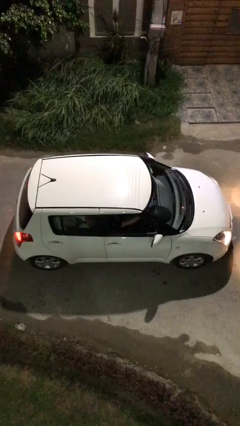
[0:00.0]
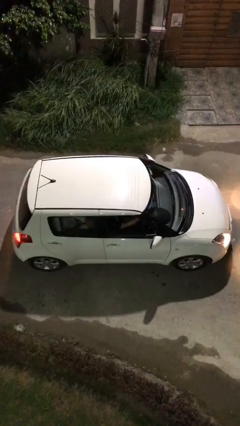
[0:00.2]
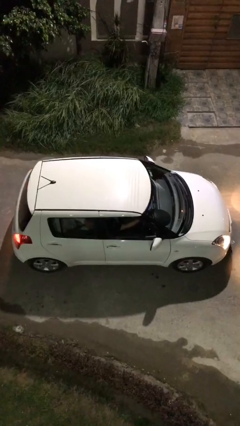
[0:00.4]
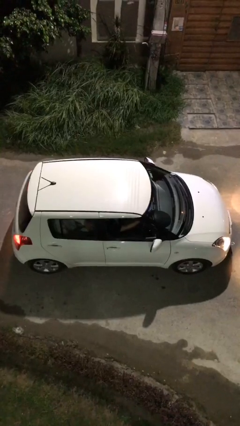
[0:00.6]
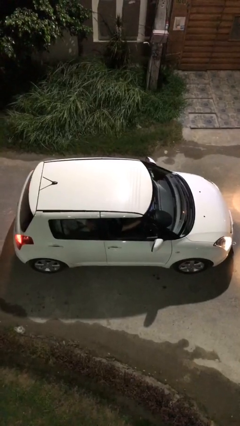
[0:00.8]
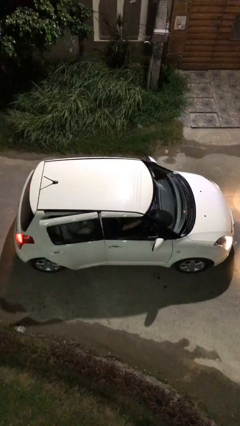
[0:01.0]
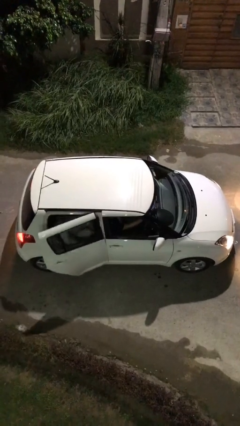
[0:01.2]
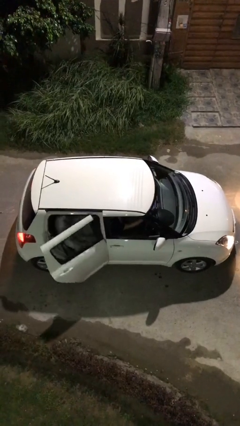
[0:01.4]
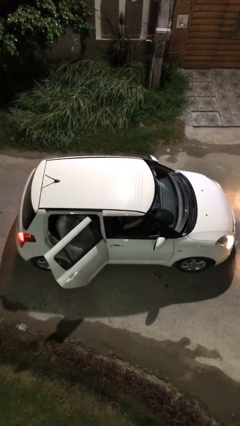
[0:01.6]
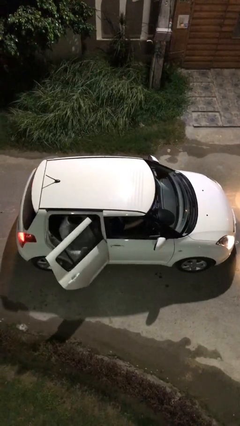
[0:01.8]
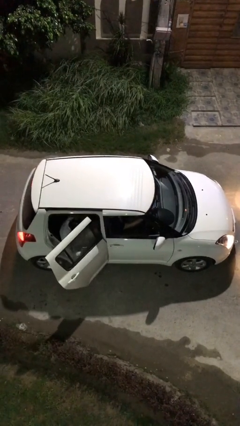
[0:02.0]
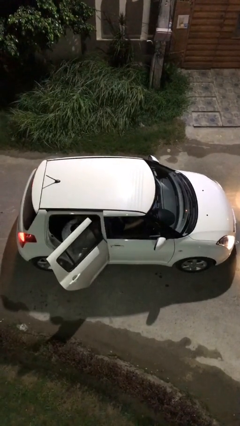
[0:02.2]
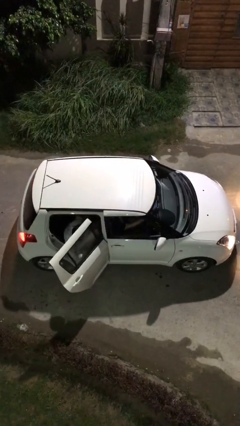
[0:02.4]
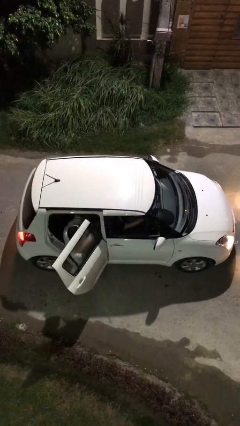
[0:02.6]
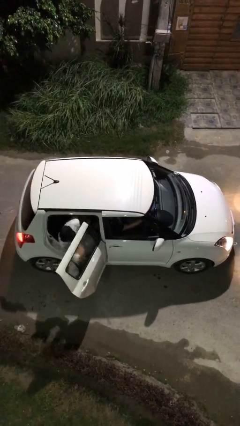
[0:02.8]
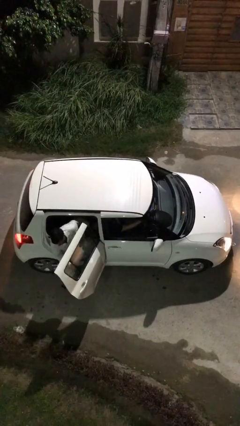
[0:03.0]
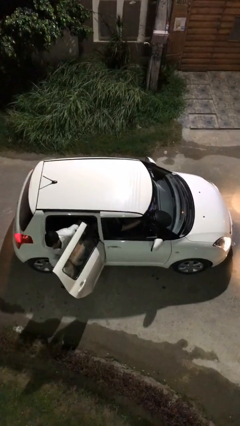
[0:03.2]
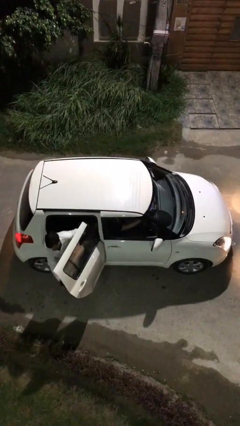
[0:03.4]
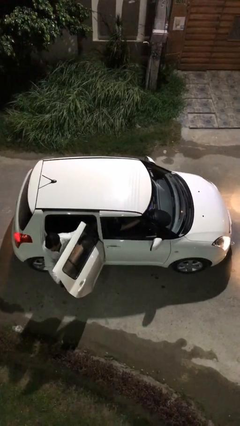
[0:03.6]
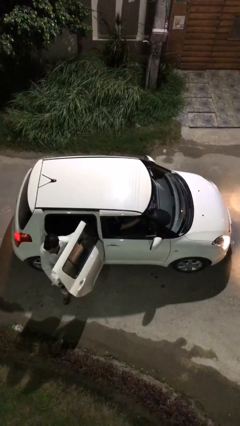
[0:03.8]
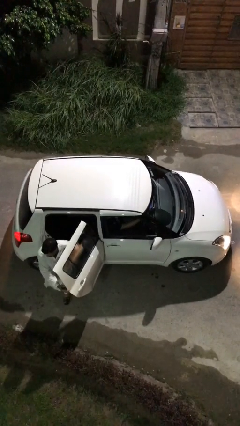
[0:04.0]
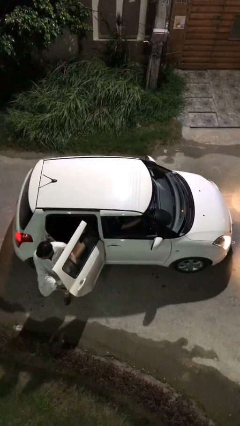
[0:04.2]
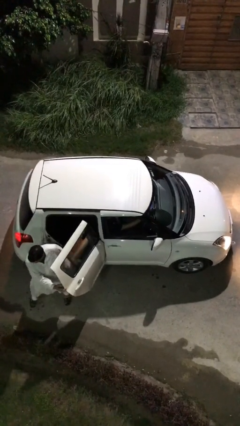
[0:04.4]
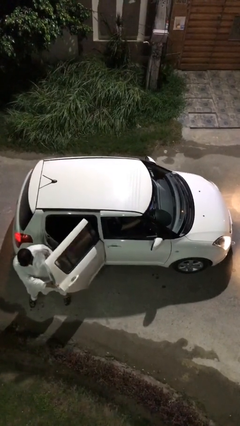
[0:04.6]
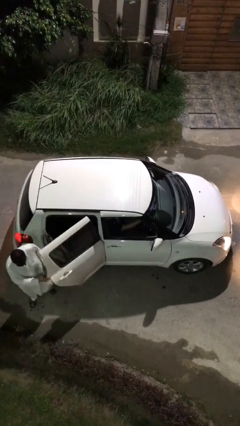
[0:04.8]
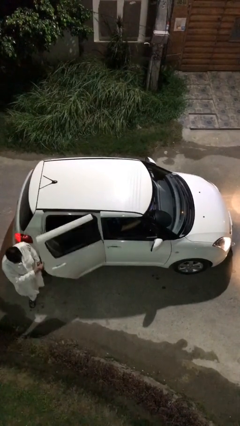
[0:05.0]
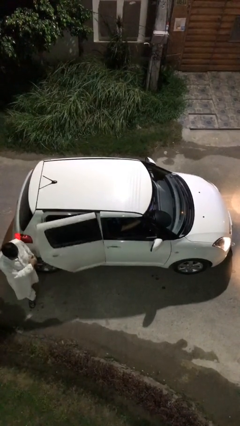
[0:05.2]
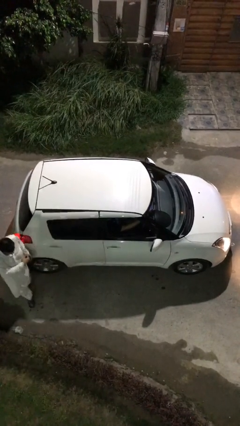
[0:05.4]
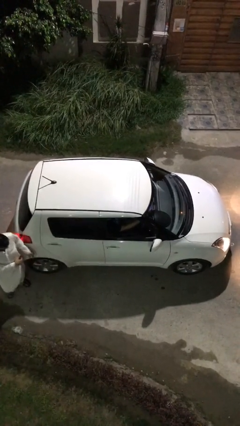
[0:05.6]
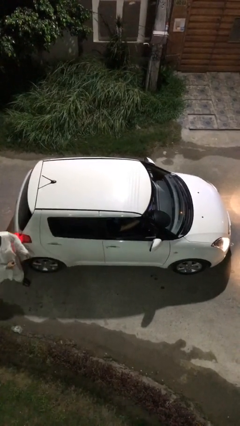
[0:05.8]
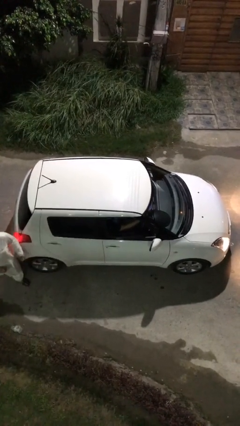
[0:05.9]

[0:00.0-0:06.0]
car drops off person

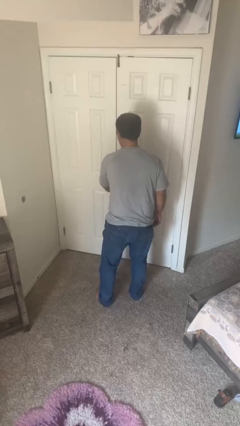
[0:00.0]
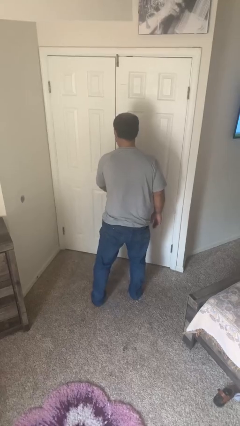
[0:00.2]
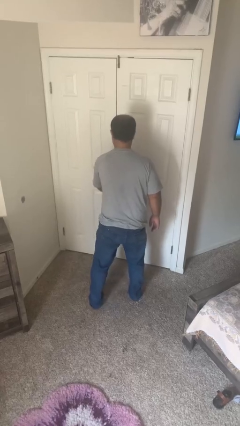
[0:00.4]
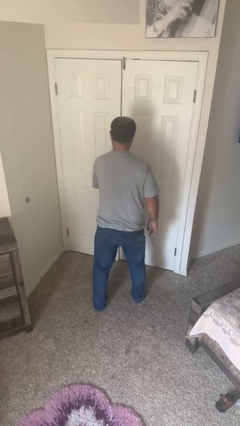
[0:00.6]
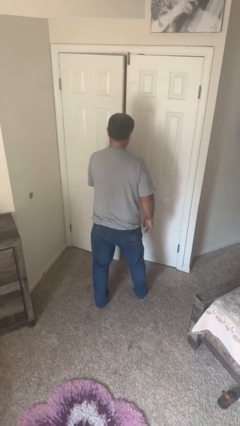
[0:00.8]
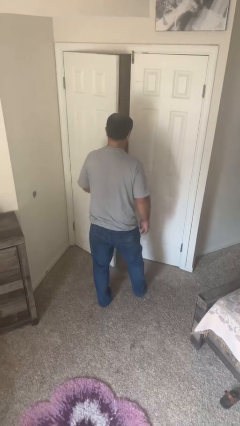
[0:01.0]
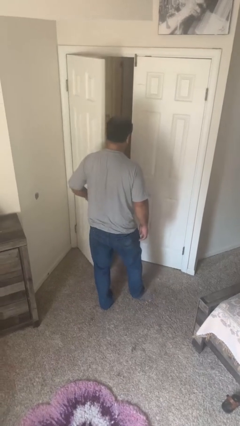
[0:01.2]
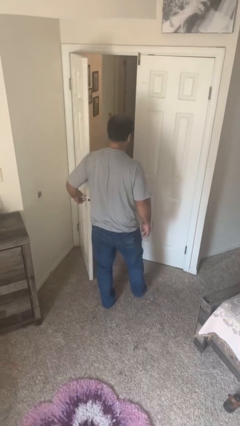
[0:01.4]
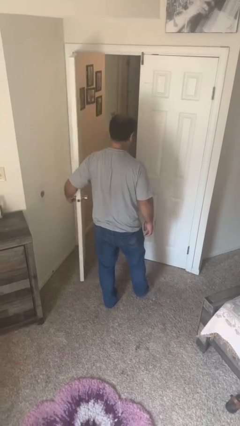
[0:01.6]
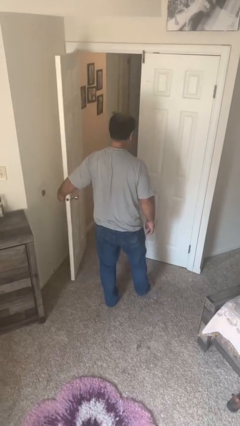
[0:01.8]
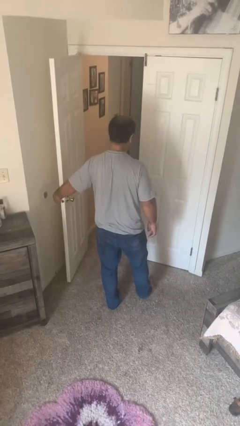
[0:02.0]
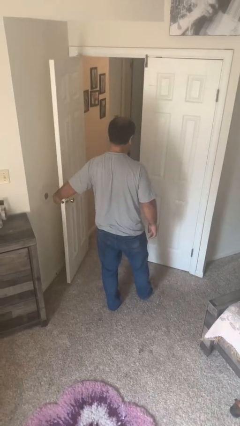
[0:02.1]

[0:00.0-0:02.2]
person opens facility door

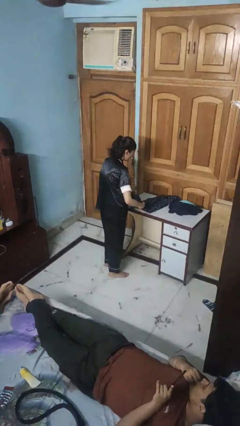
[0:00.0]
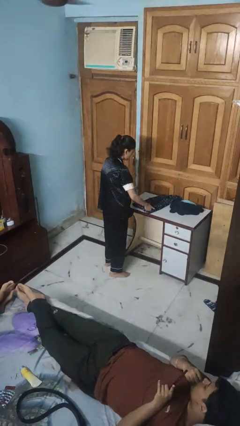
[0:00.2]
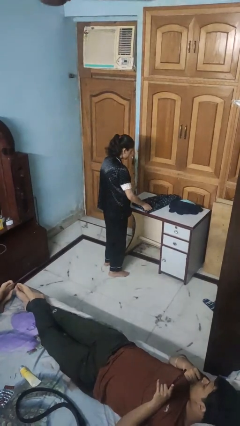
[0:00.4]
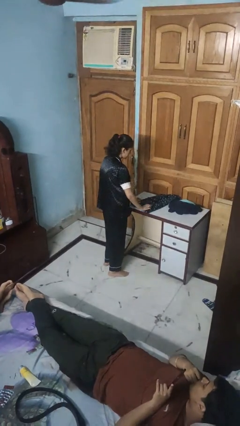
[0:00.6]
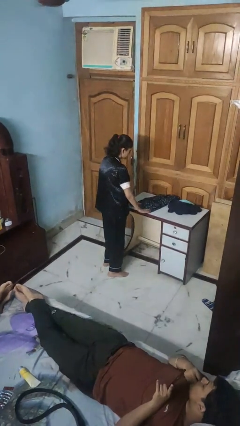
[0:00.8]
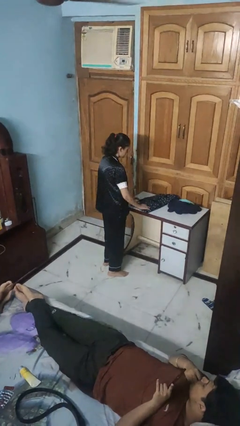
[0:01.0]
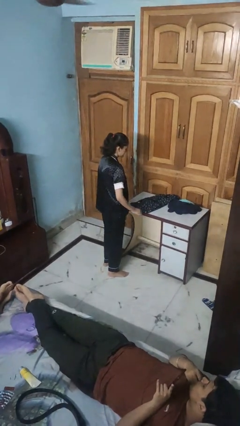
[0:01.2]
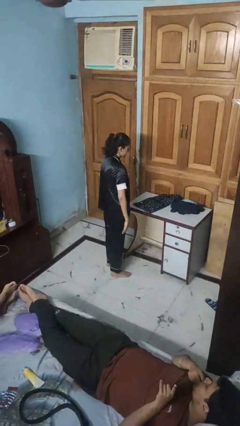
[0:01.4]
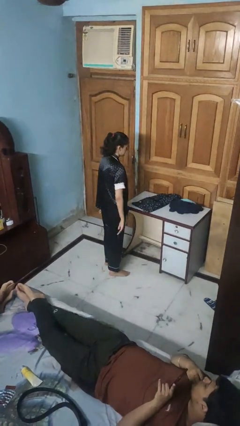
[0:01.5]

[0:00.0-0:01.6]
person folds shirt

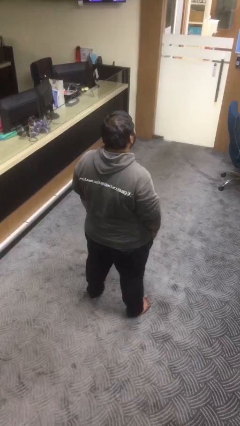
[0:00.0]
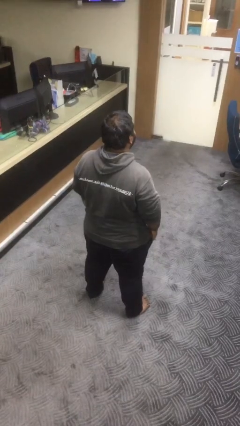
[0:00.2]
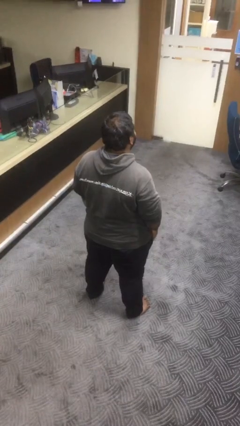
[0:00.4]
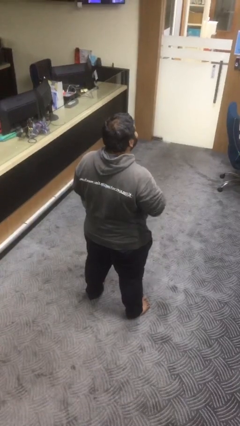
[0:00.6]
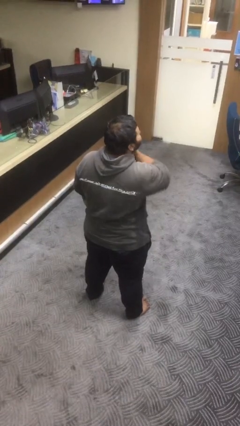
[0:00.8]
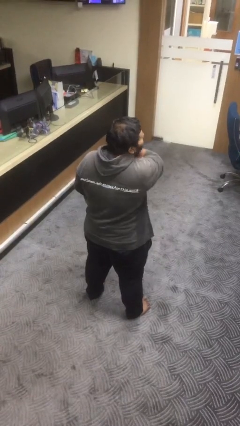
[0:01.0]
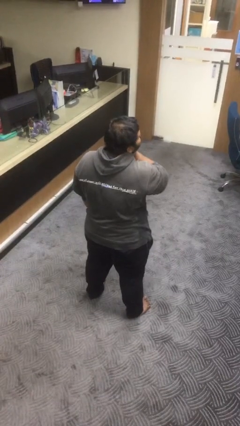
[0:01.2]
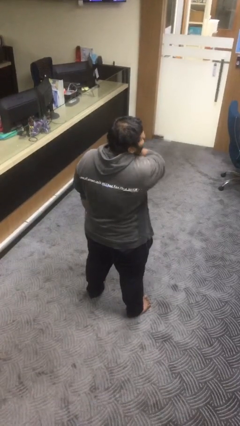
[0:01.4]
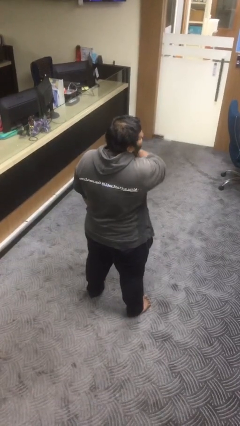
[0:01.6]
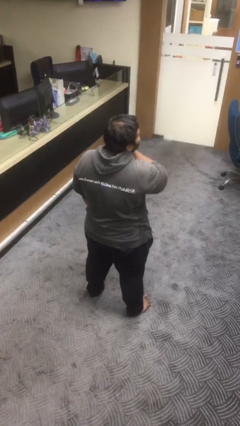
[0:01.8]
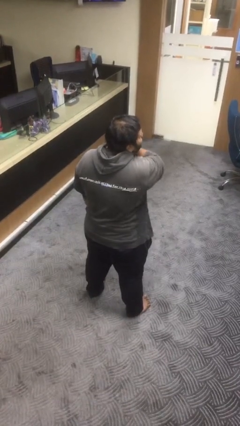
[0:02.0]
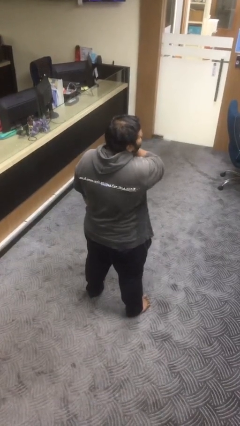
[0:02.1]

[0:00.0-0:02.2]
person rubs neck

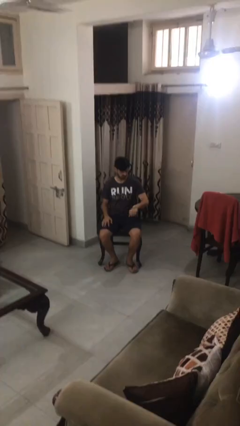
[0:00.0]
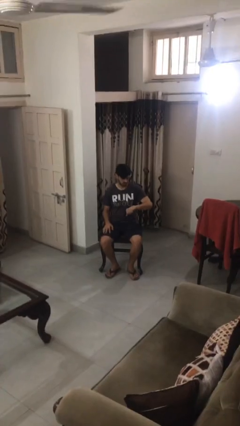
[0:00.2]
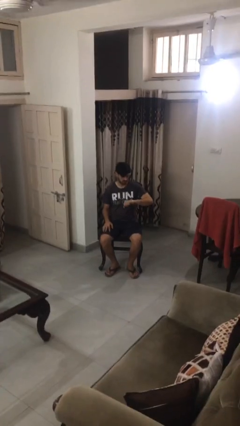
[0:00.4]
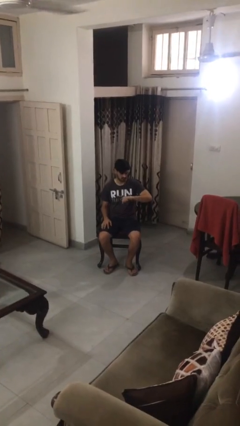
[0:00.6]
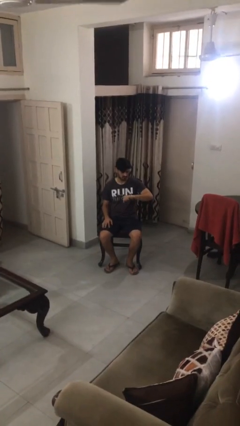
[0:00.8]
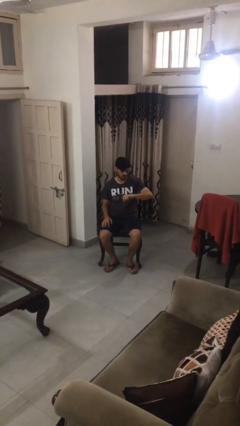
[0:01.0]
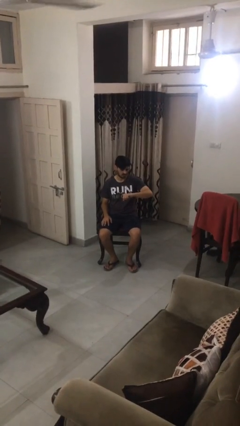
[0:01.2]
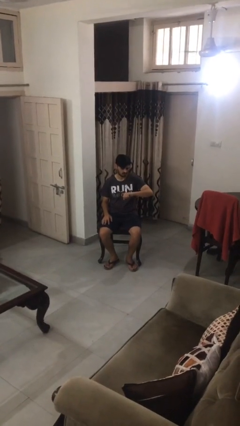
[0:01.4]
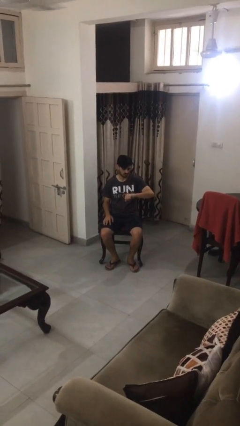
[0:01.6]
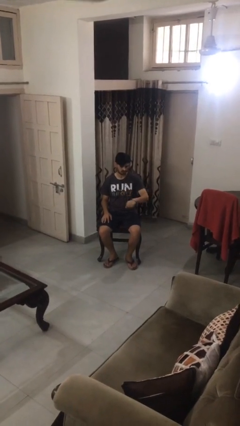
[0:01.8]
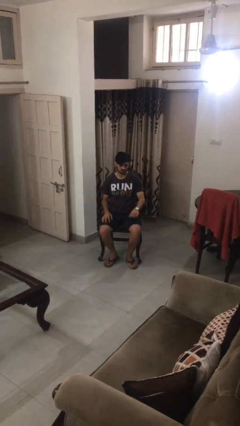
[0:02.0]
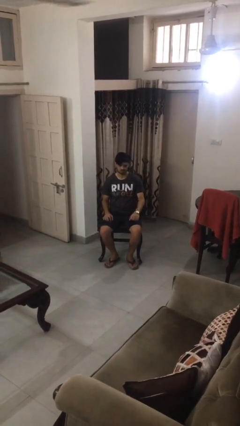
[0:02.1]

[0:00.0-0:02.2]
person looks at wristwatch

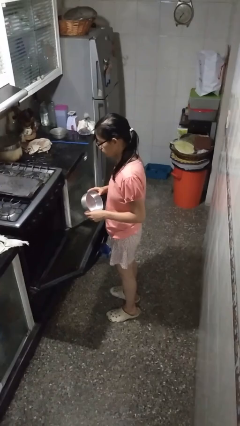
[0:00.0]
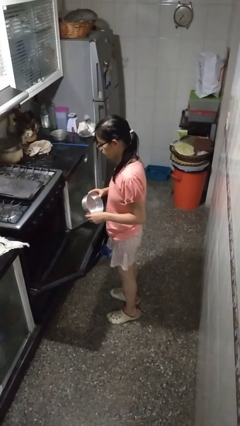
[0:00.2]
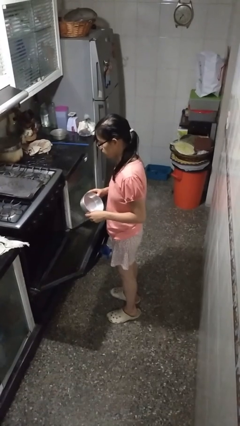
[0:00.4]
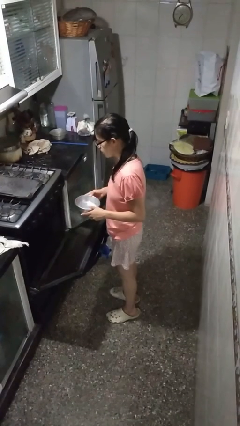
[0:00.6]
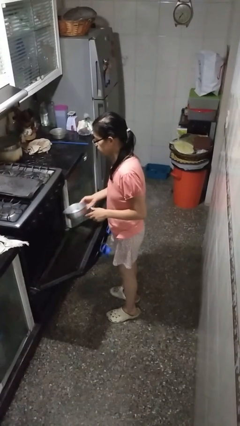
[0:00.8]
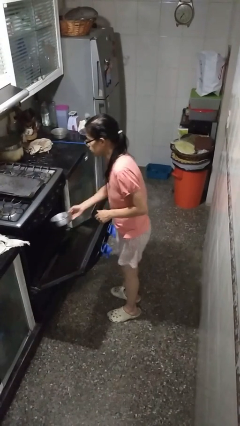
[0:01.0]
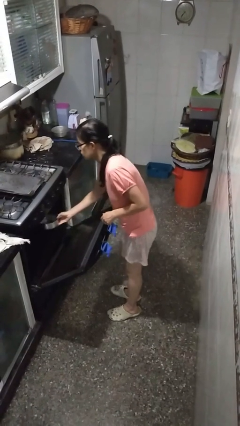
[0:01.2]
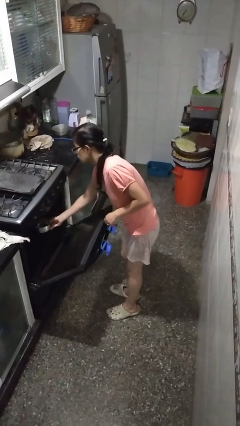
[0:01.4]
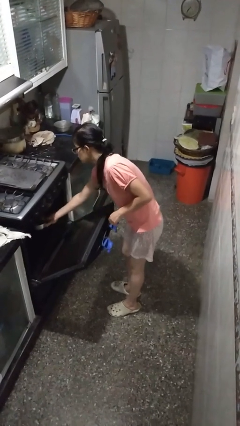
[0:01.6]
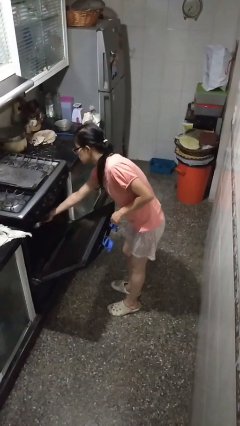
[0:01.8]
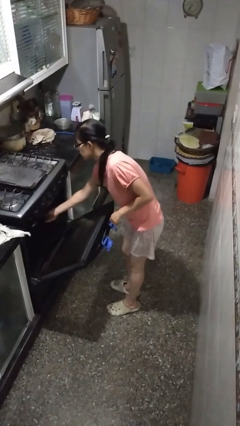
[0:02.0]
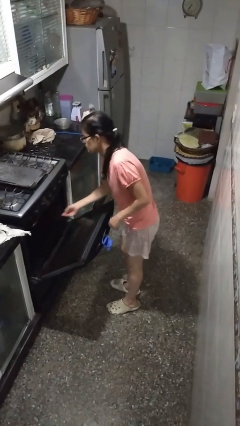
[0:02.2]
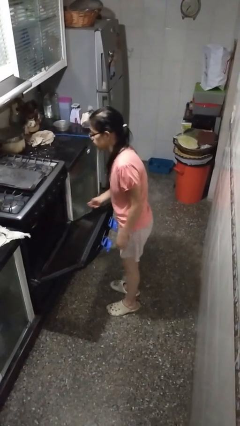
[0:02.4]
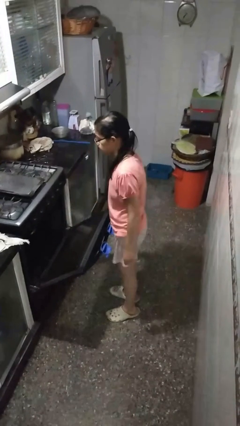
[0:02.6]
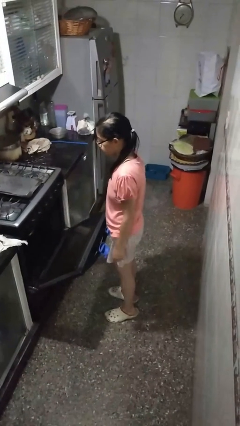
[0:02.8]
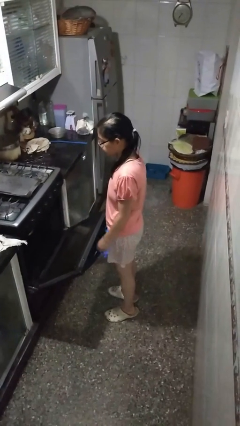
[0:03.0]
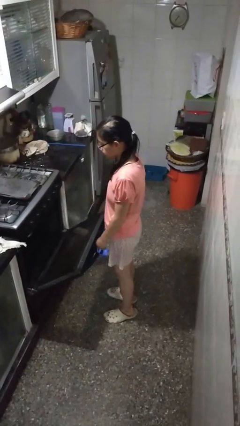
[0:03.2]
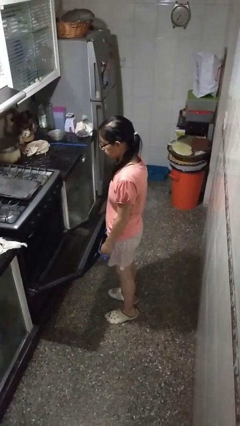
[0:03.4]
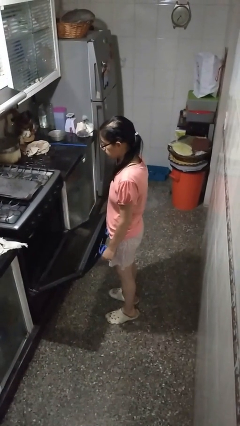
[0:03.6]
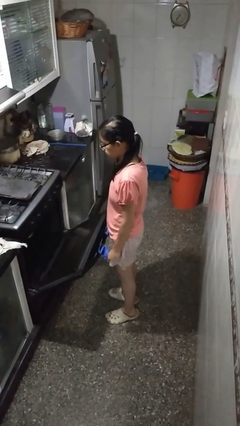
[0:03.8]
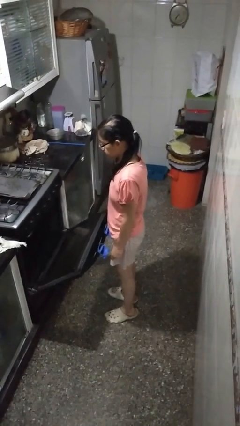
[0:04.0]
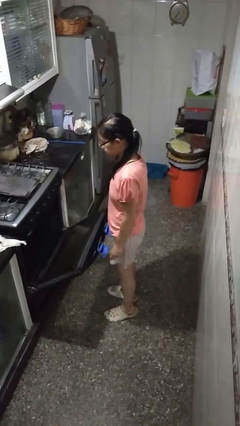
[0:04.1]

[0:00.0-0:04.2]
person puts object into oven
